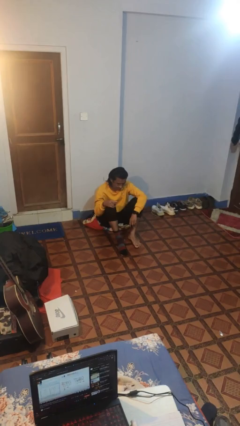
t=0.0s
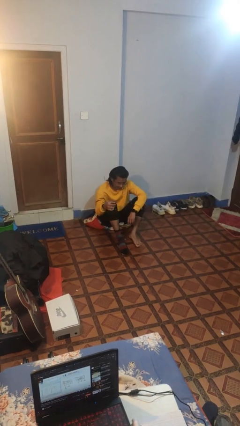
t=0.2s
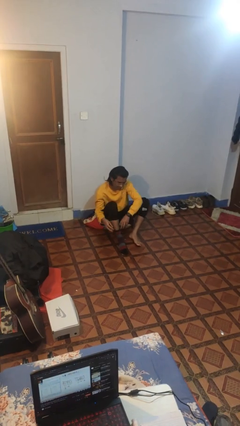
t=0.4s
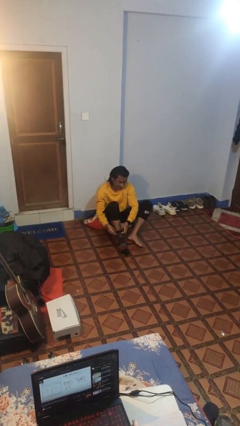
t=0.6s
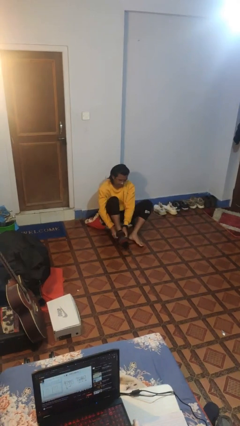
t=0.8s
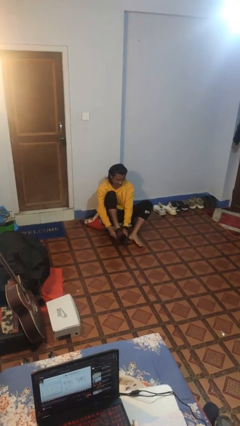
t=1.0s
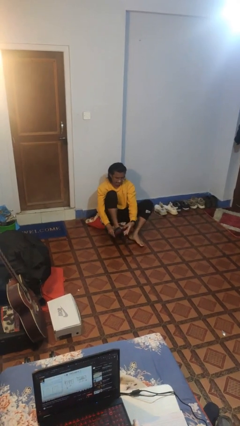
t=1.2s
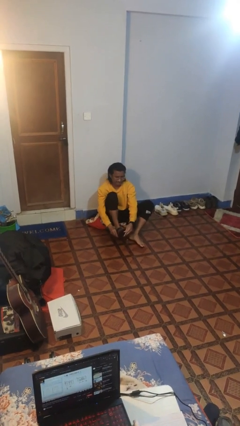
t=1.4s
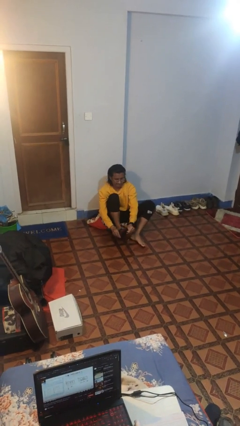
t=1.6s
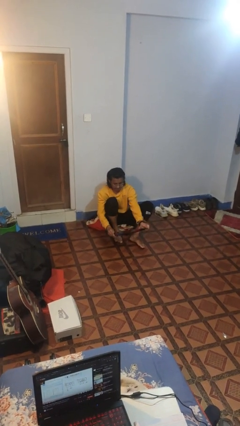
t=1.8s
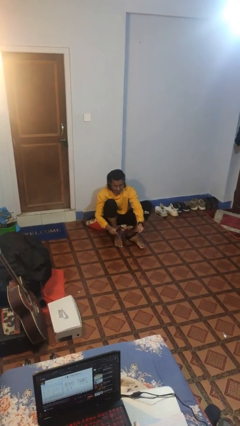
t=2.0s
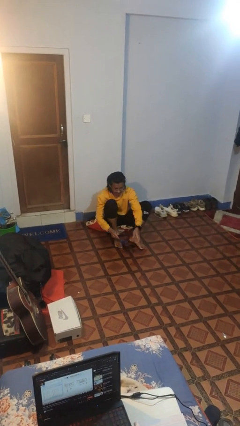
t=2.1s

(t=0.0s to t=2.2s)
person takes off socks

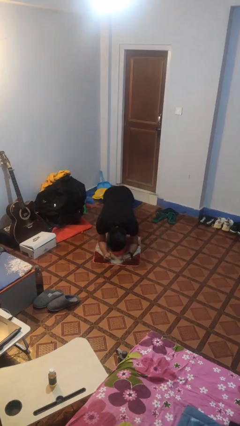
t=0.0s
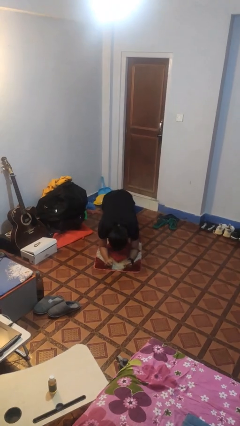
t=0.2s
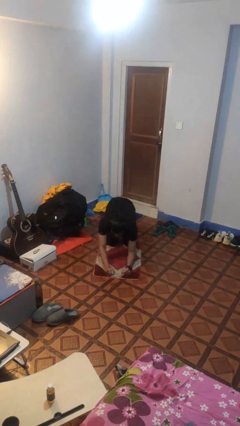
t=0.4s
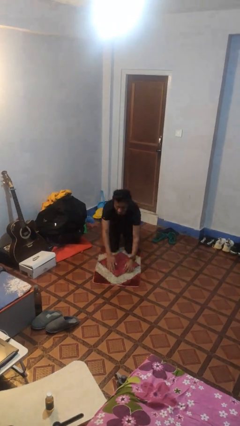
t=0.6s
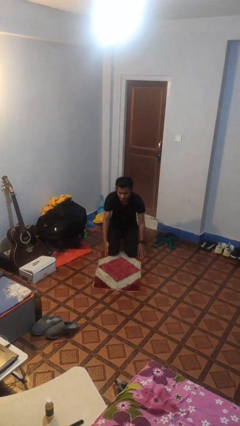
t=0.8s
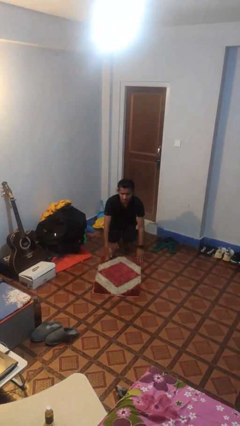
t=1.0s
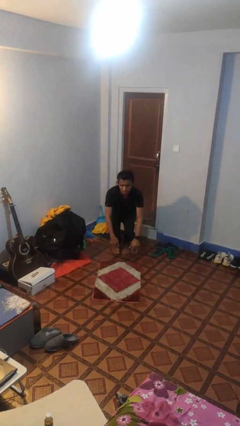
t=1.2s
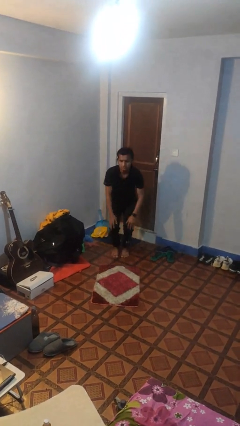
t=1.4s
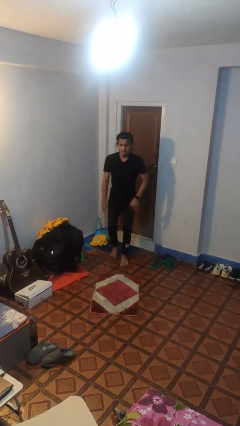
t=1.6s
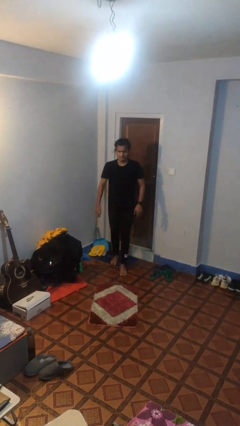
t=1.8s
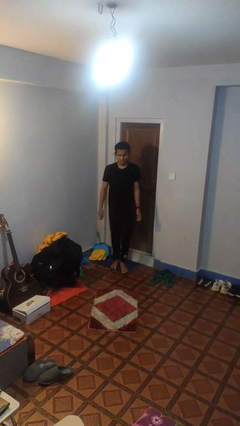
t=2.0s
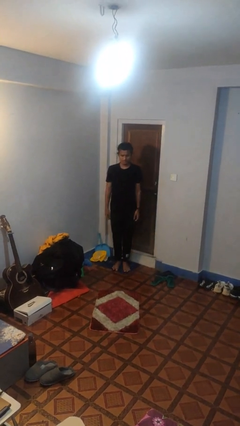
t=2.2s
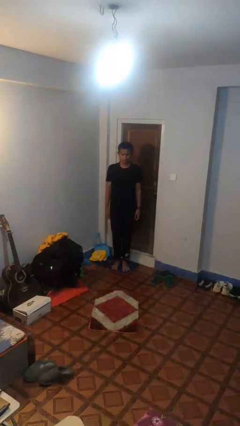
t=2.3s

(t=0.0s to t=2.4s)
person stands up from floor

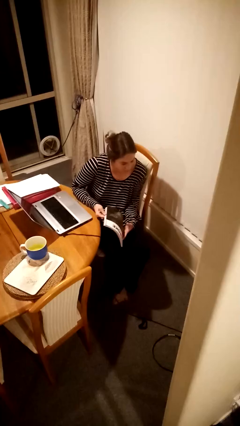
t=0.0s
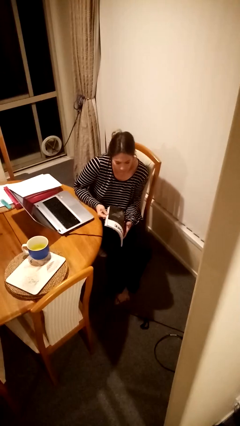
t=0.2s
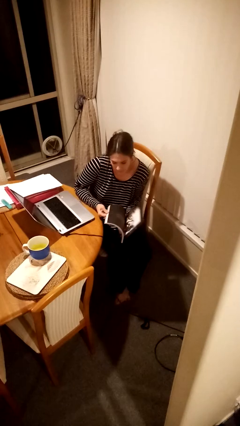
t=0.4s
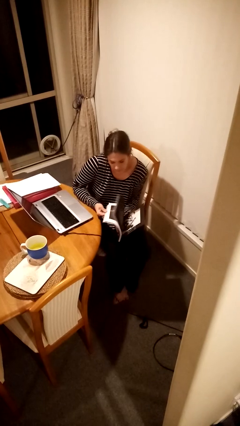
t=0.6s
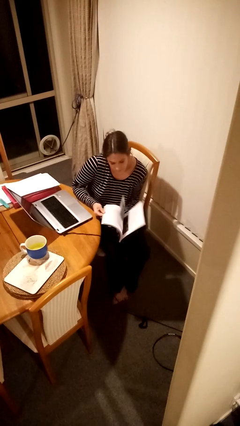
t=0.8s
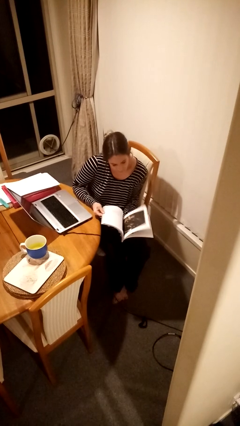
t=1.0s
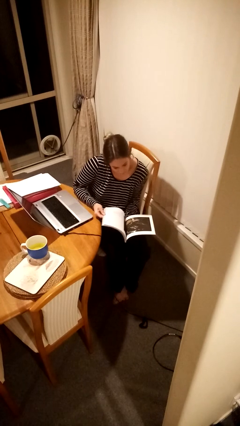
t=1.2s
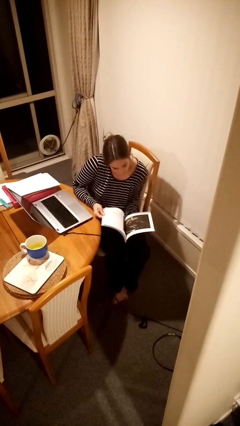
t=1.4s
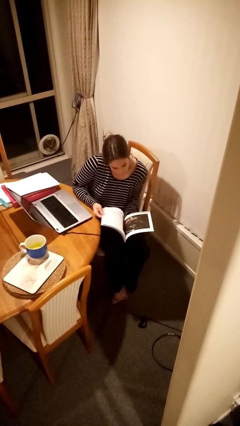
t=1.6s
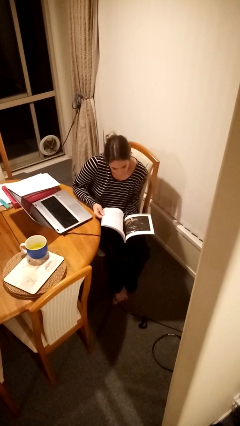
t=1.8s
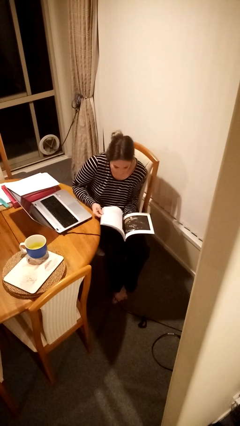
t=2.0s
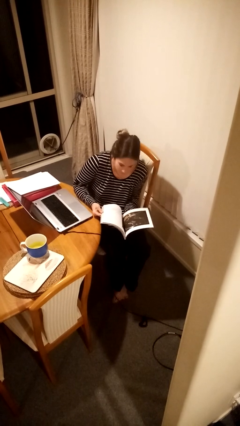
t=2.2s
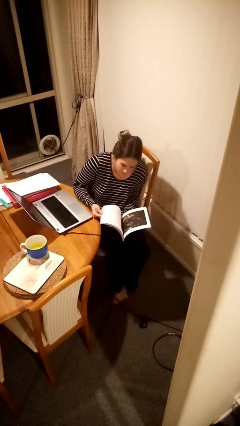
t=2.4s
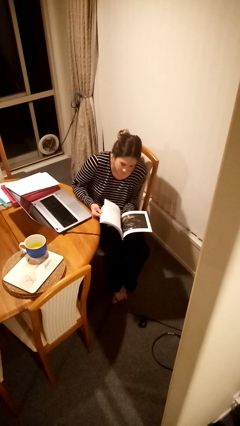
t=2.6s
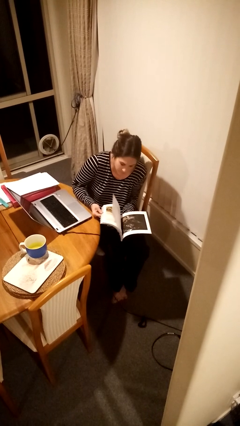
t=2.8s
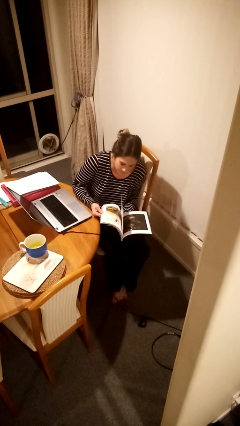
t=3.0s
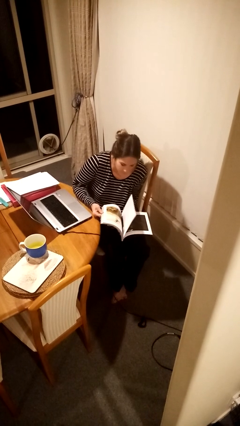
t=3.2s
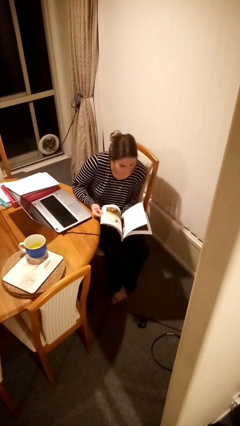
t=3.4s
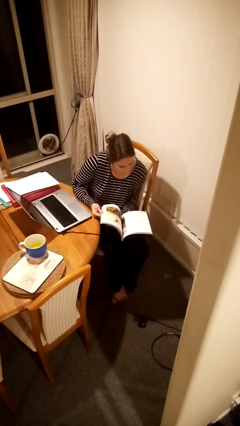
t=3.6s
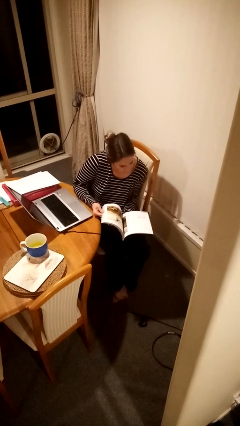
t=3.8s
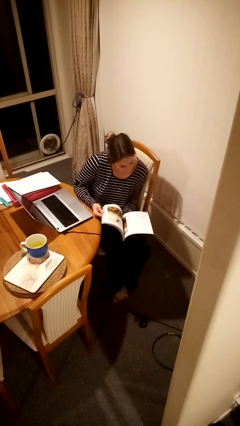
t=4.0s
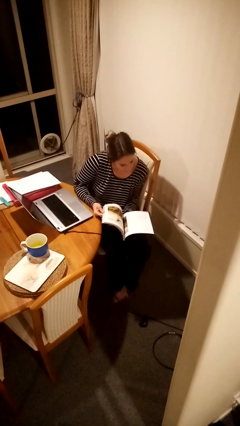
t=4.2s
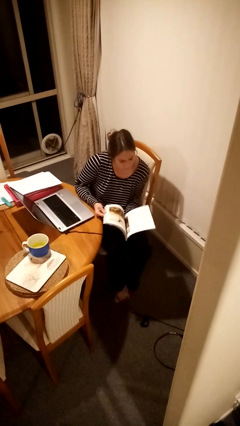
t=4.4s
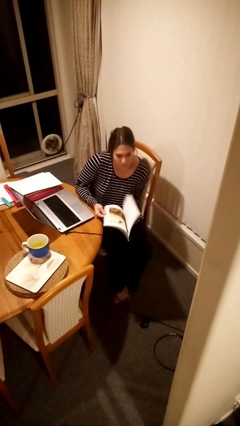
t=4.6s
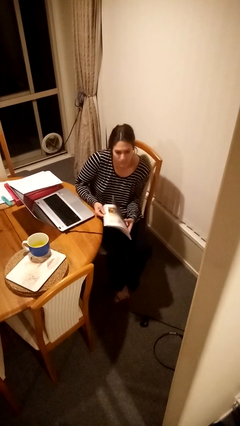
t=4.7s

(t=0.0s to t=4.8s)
person reads magazine

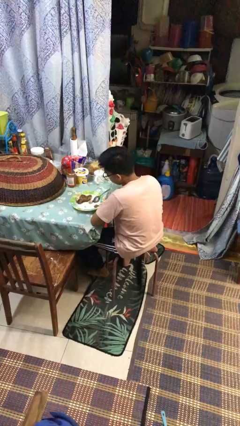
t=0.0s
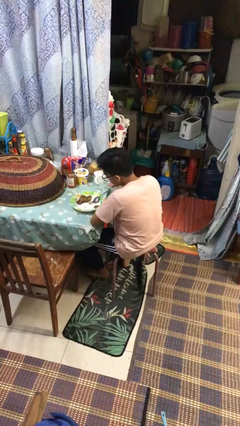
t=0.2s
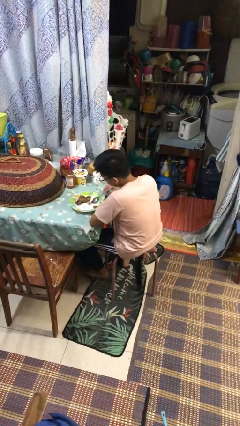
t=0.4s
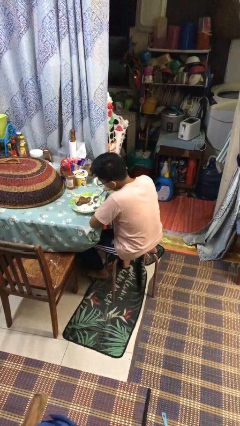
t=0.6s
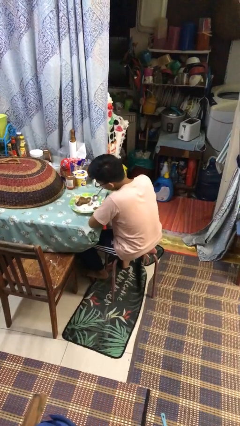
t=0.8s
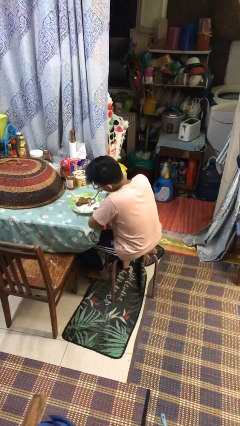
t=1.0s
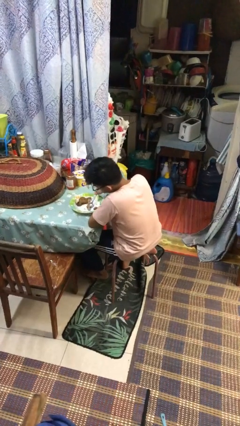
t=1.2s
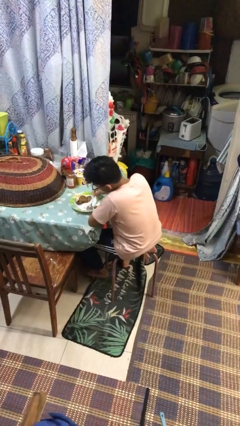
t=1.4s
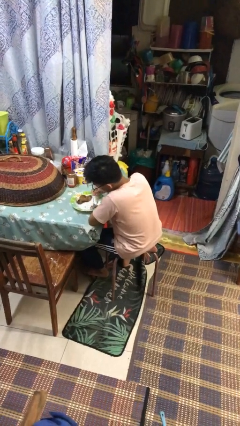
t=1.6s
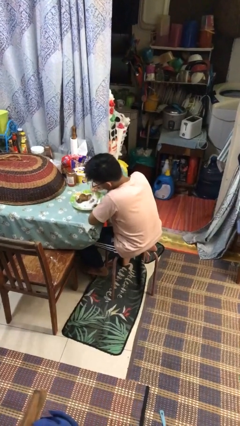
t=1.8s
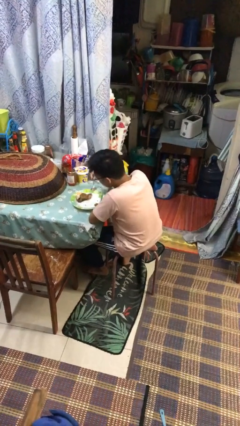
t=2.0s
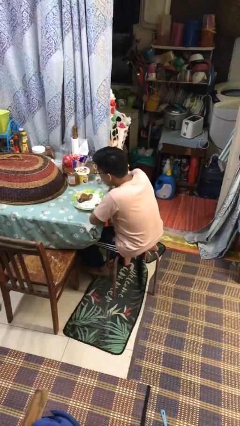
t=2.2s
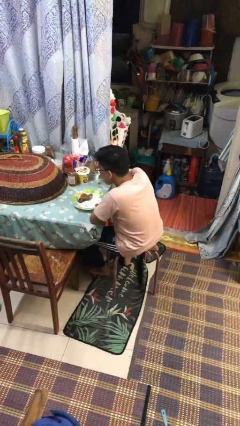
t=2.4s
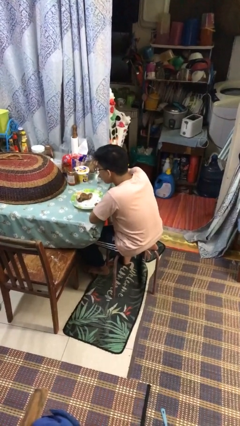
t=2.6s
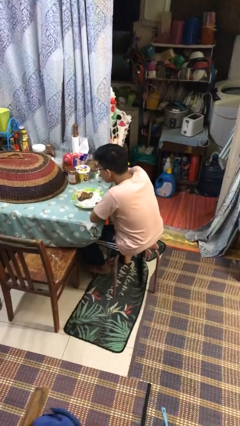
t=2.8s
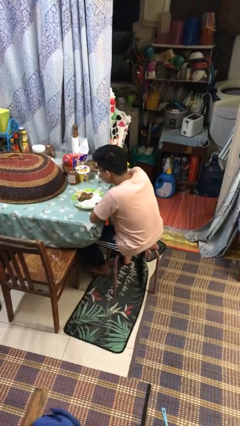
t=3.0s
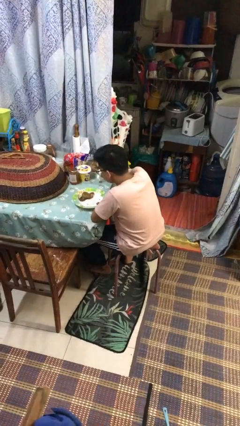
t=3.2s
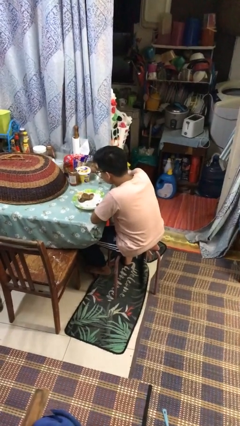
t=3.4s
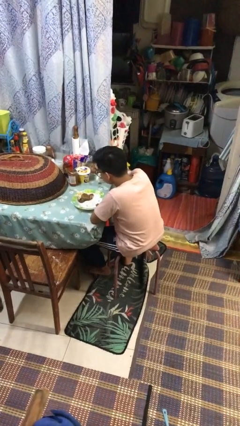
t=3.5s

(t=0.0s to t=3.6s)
person eats with utensil

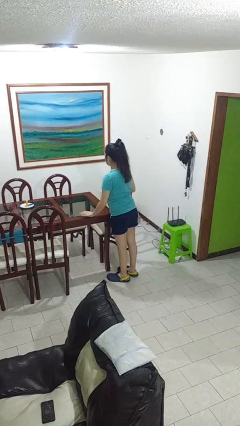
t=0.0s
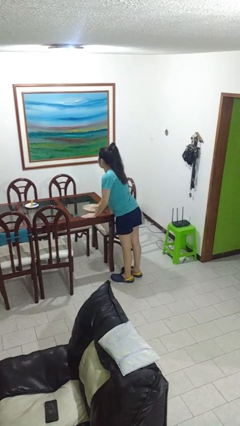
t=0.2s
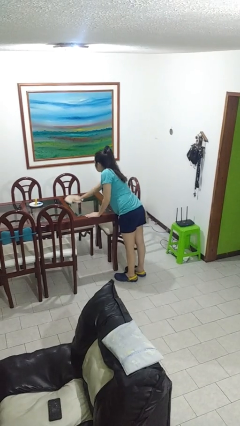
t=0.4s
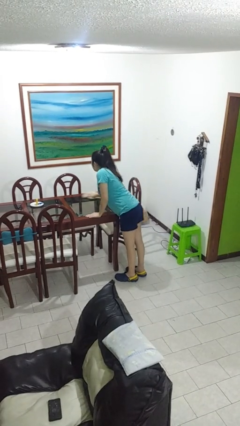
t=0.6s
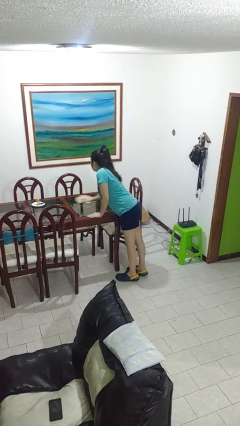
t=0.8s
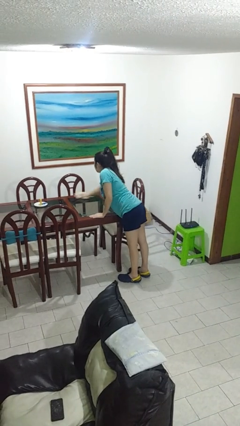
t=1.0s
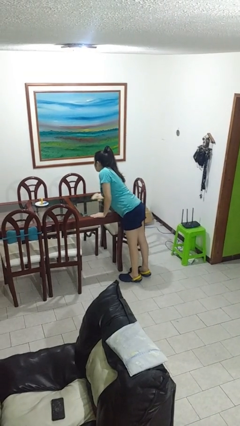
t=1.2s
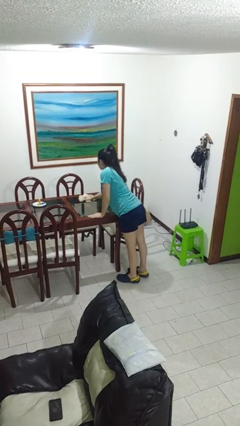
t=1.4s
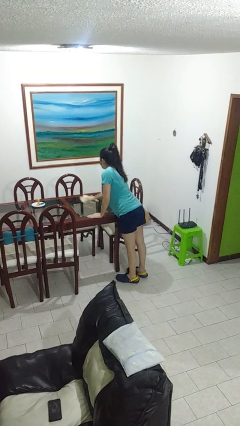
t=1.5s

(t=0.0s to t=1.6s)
person cleans table with rag

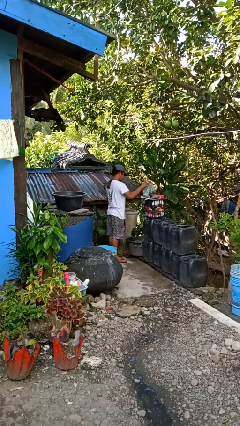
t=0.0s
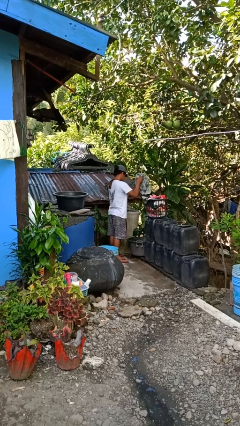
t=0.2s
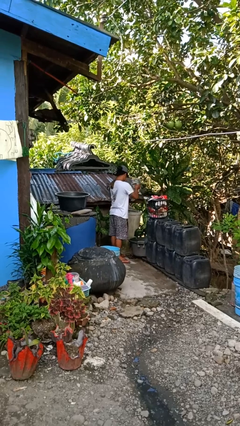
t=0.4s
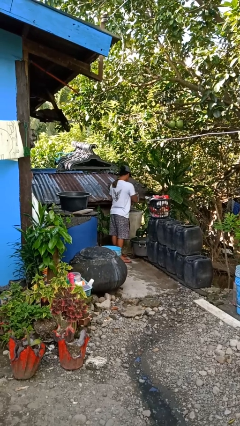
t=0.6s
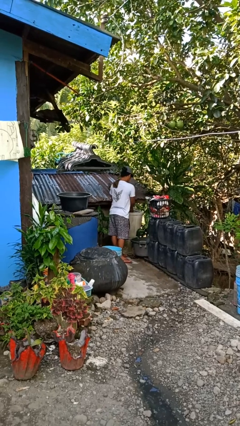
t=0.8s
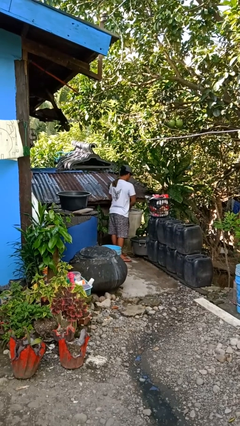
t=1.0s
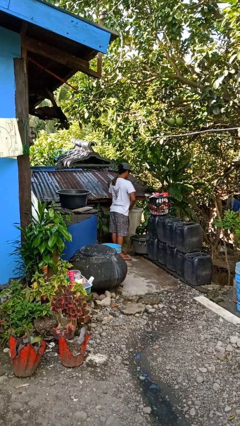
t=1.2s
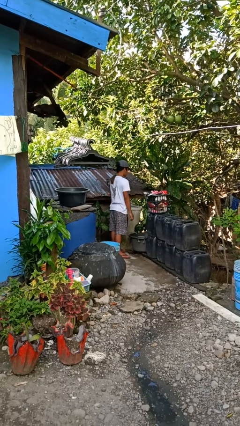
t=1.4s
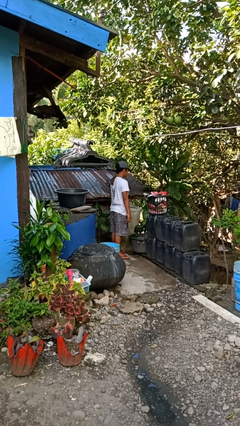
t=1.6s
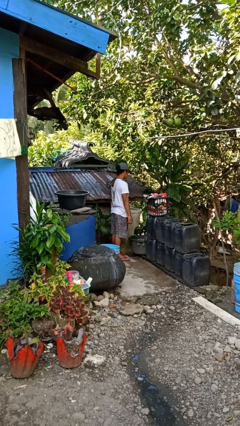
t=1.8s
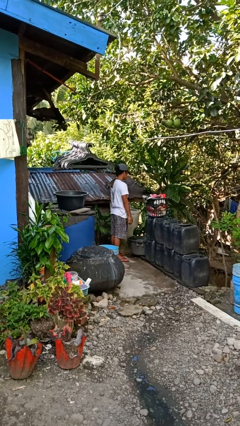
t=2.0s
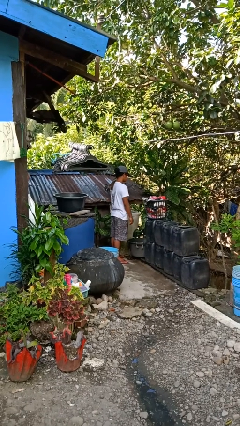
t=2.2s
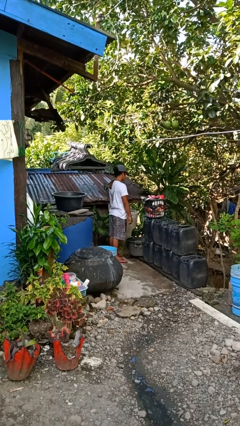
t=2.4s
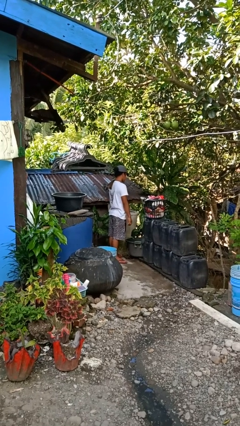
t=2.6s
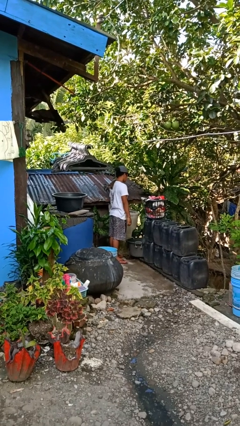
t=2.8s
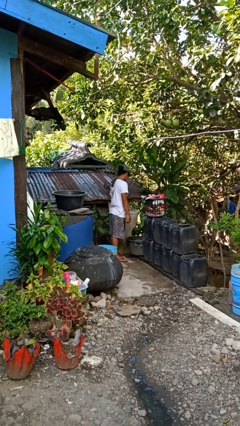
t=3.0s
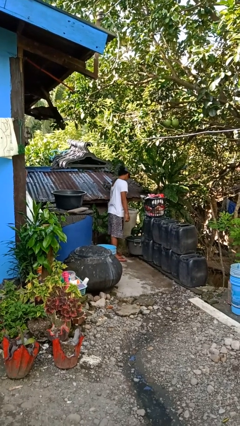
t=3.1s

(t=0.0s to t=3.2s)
person loads dryer
